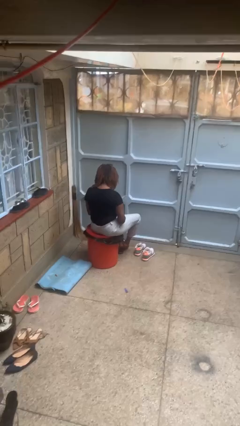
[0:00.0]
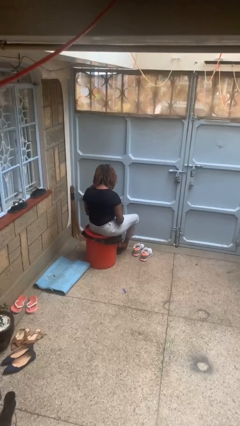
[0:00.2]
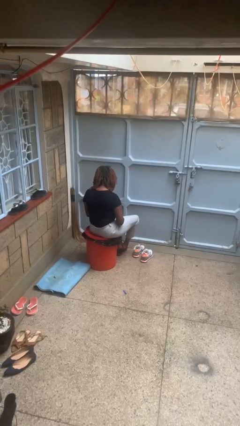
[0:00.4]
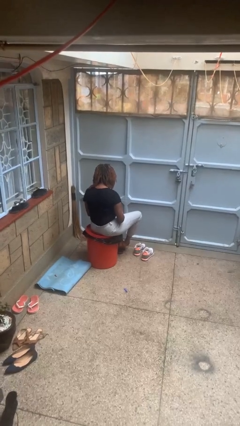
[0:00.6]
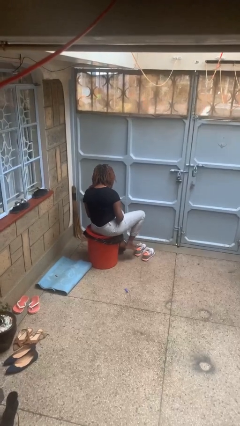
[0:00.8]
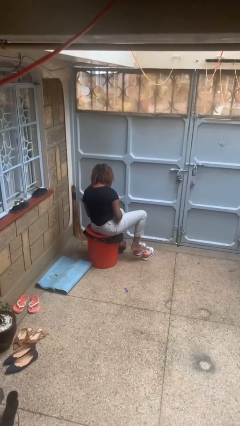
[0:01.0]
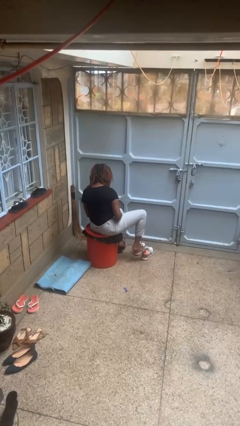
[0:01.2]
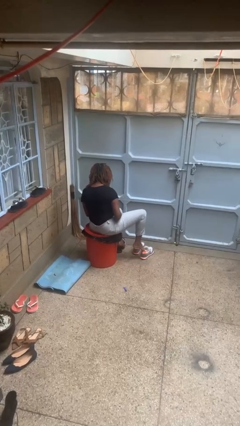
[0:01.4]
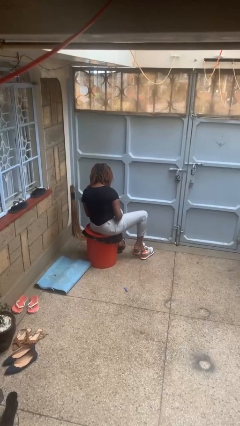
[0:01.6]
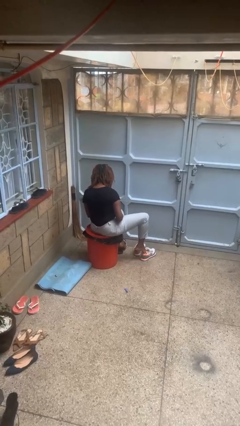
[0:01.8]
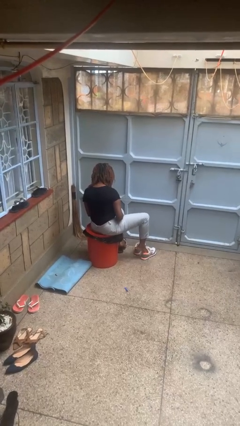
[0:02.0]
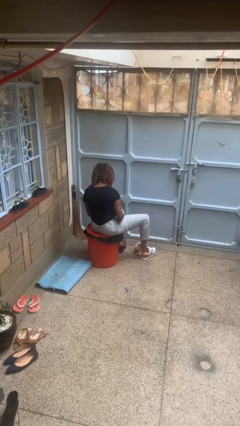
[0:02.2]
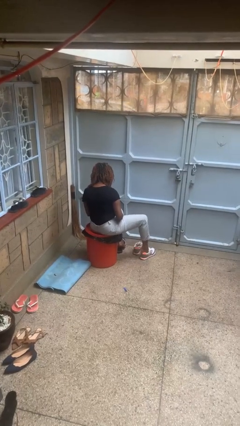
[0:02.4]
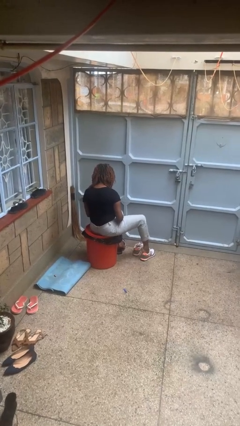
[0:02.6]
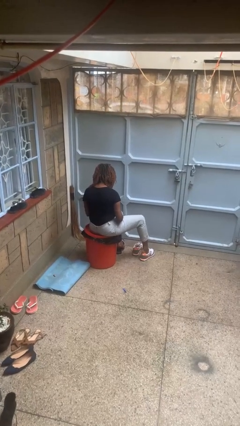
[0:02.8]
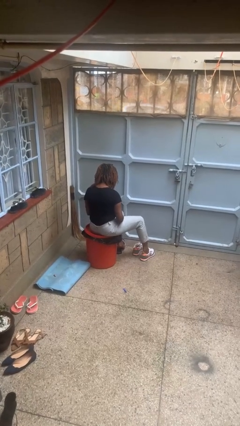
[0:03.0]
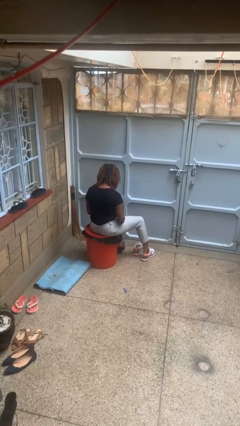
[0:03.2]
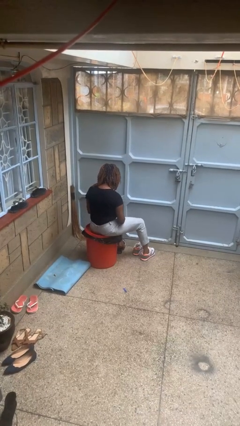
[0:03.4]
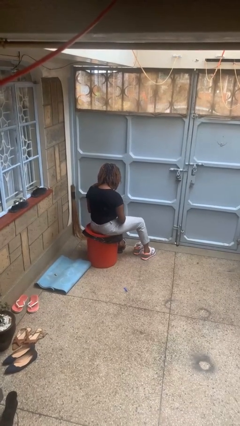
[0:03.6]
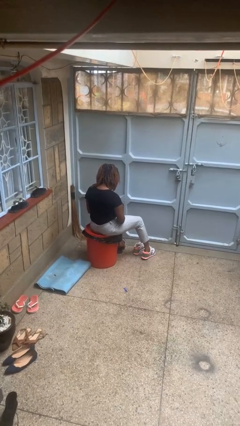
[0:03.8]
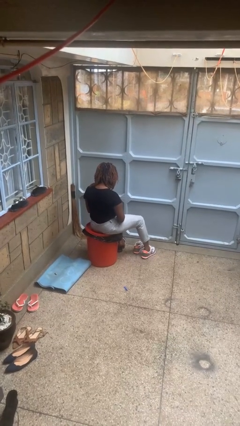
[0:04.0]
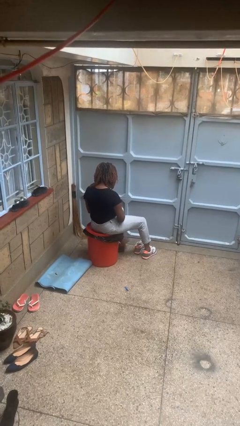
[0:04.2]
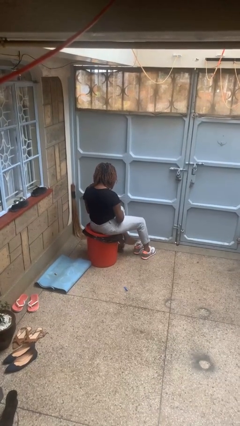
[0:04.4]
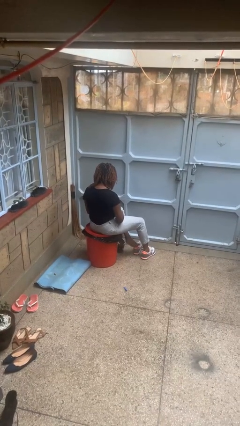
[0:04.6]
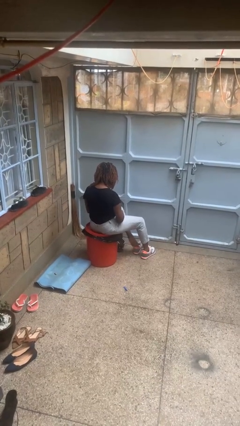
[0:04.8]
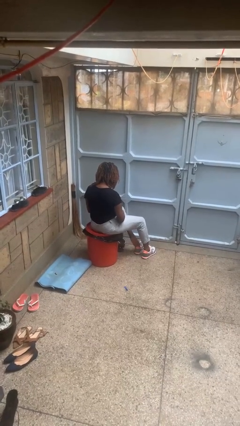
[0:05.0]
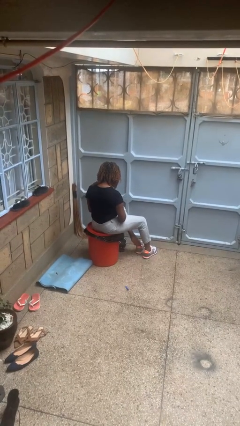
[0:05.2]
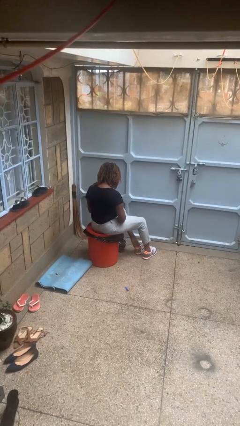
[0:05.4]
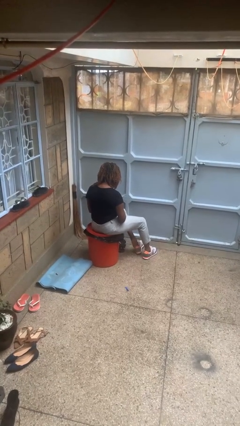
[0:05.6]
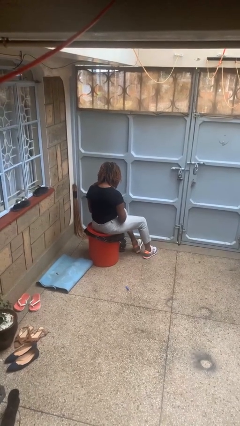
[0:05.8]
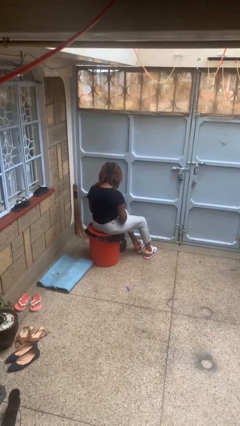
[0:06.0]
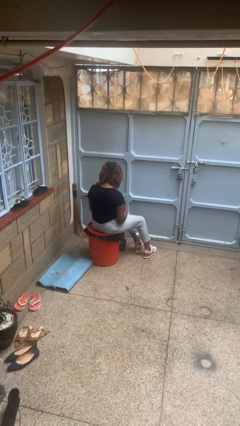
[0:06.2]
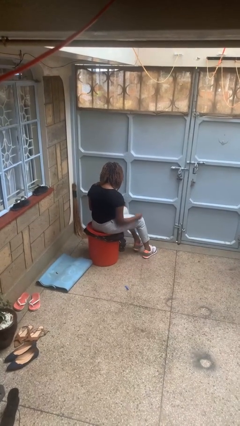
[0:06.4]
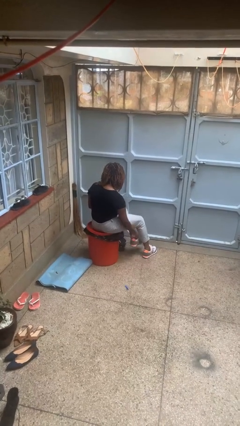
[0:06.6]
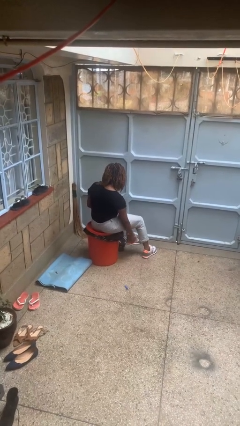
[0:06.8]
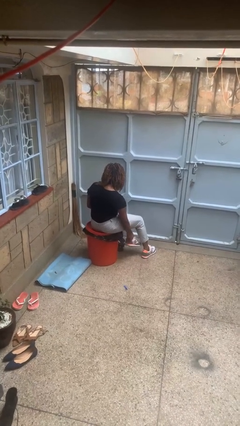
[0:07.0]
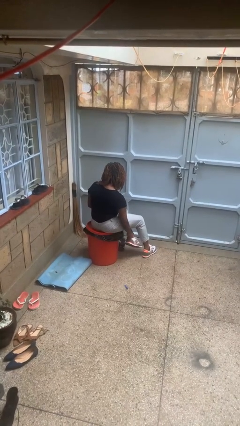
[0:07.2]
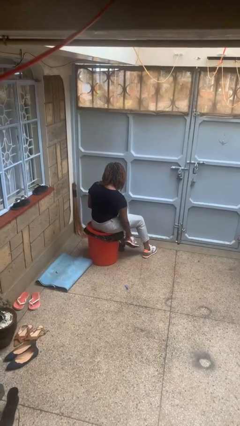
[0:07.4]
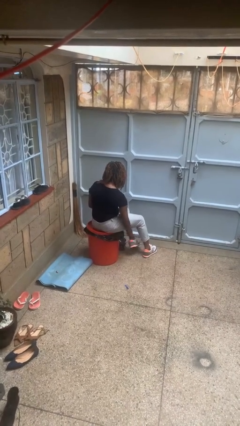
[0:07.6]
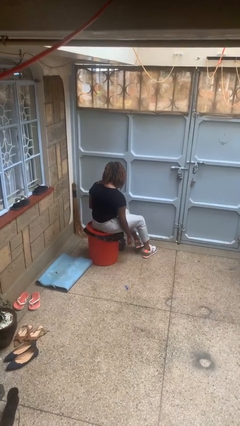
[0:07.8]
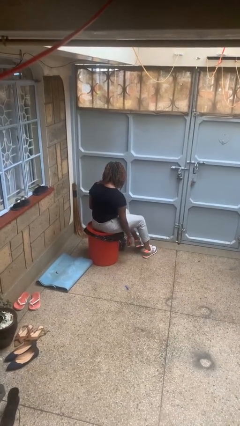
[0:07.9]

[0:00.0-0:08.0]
person puts on shoes

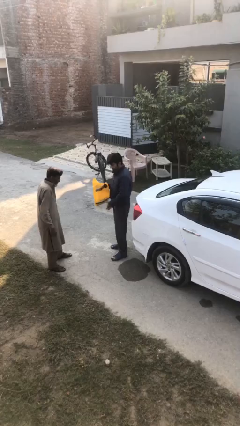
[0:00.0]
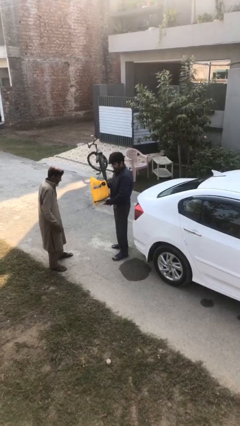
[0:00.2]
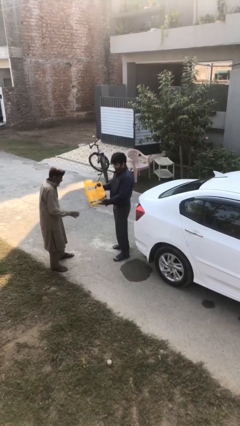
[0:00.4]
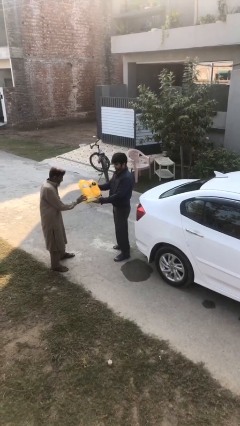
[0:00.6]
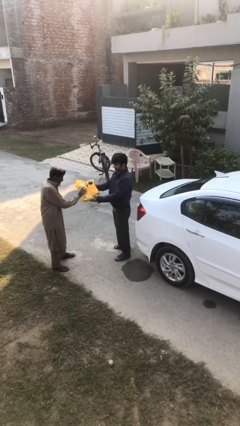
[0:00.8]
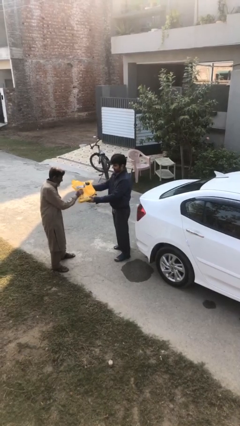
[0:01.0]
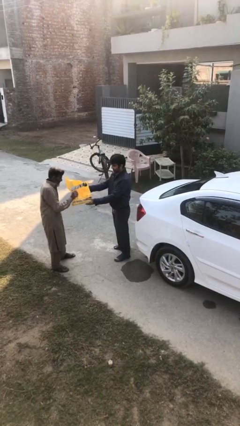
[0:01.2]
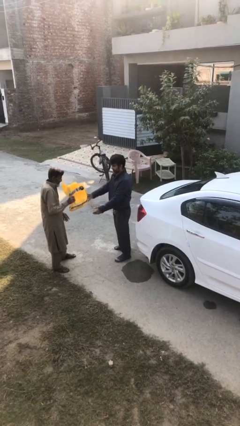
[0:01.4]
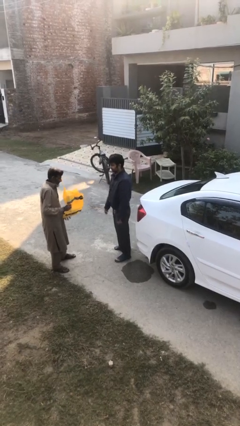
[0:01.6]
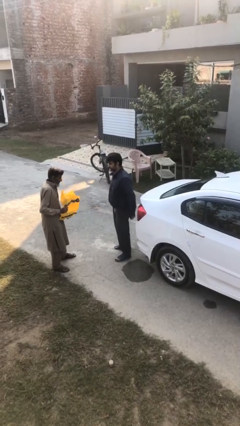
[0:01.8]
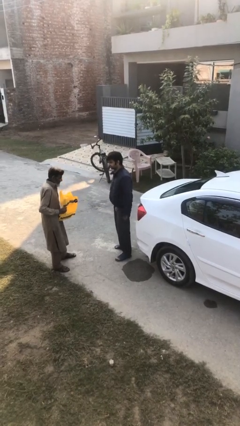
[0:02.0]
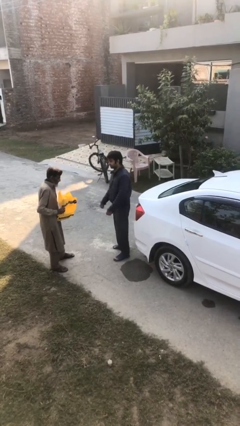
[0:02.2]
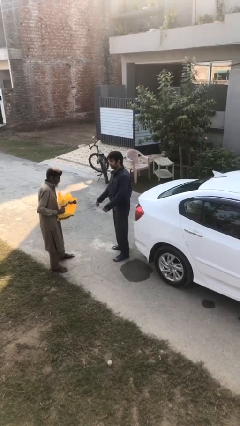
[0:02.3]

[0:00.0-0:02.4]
person transfers object to person

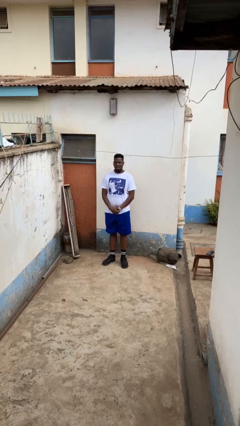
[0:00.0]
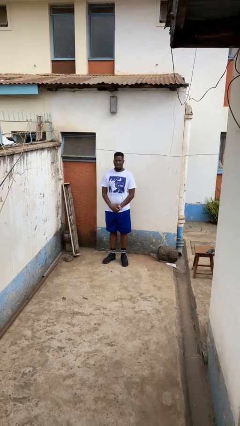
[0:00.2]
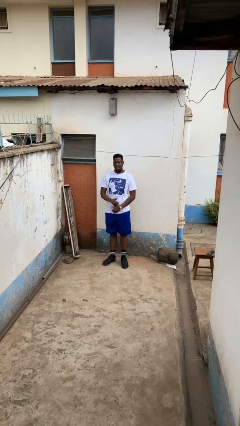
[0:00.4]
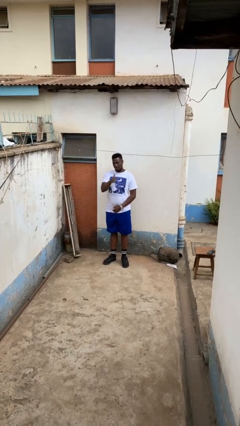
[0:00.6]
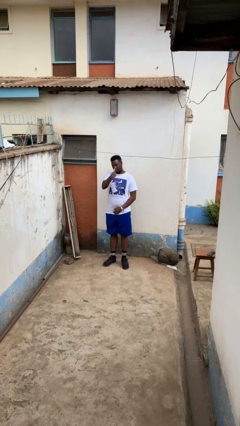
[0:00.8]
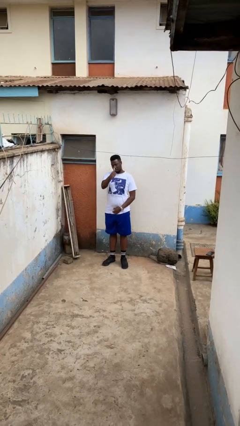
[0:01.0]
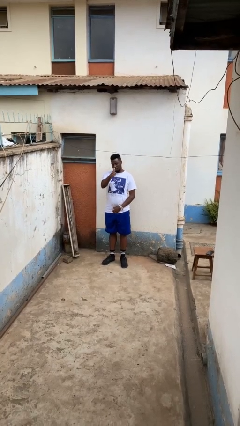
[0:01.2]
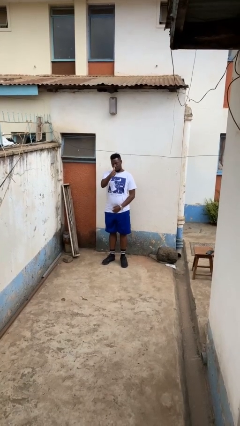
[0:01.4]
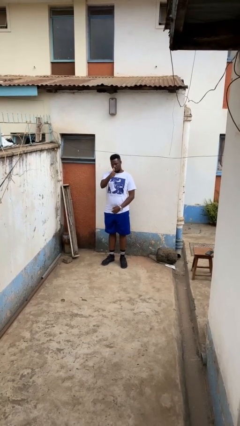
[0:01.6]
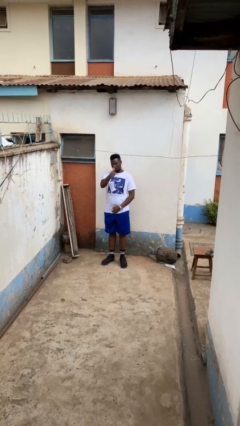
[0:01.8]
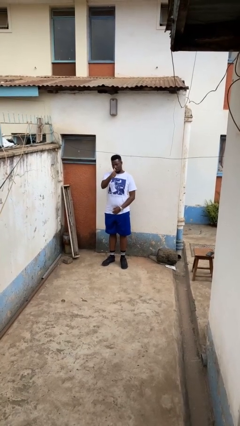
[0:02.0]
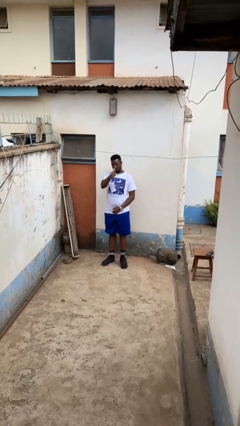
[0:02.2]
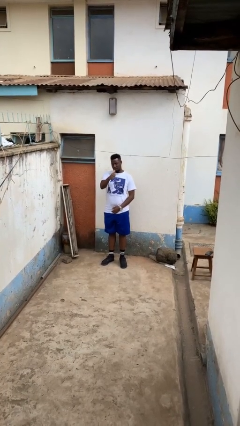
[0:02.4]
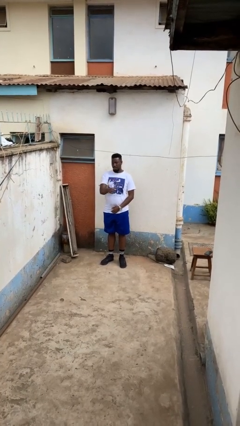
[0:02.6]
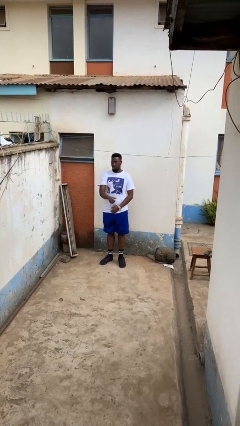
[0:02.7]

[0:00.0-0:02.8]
person gestures thumbs up

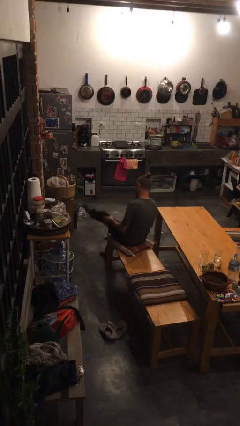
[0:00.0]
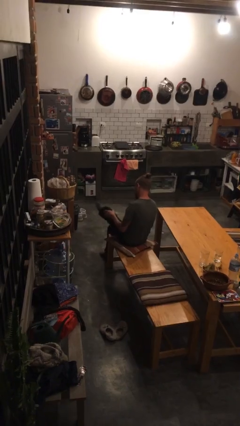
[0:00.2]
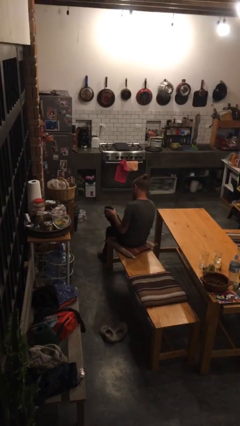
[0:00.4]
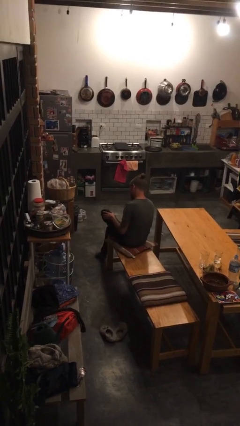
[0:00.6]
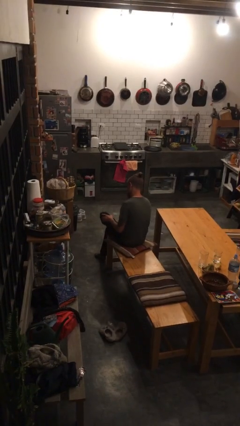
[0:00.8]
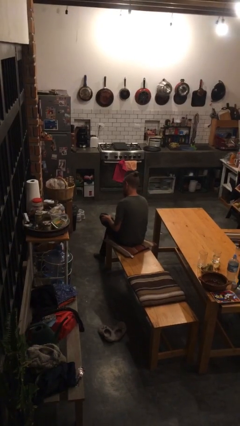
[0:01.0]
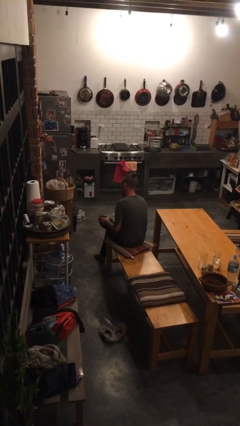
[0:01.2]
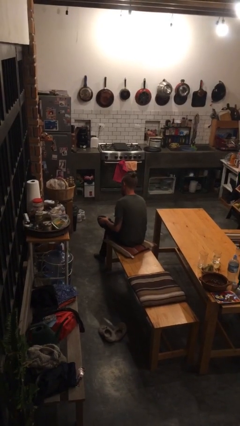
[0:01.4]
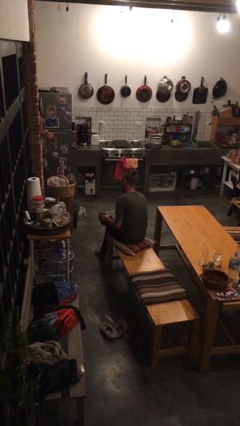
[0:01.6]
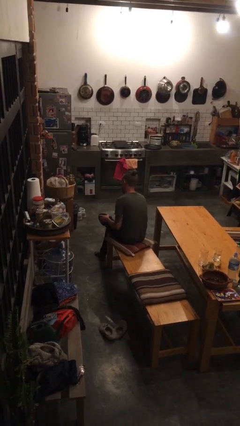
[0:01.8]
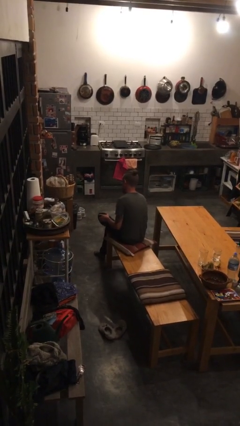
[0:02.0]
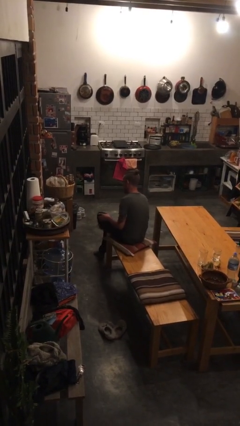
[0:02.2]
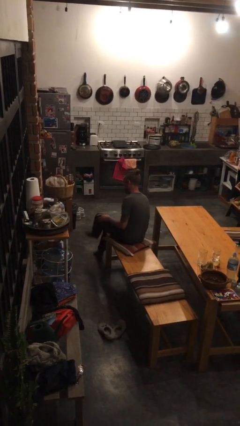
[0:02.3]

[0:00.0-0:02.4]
person crosses legs

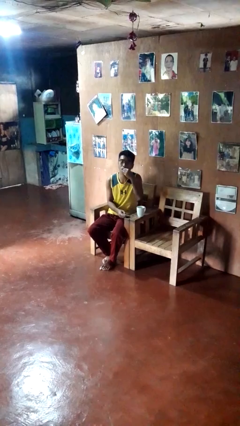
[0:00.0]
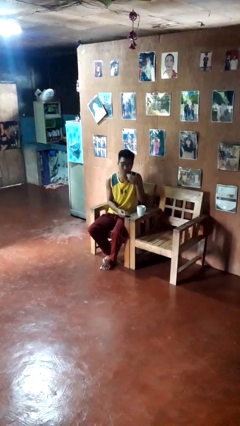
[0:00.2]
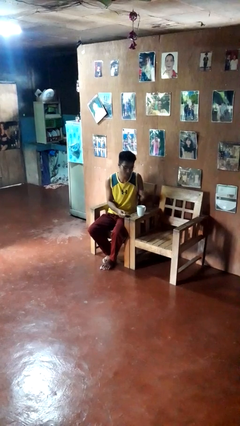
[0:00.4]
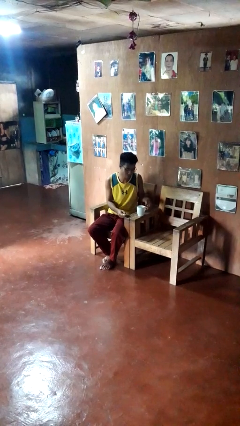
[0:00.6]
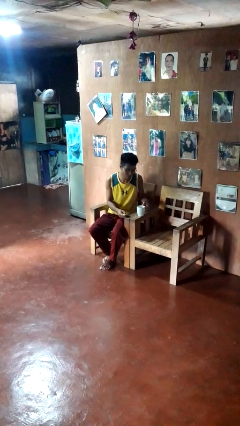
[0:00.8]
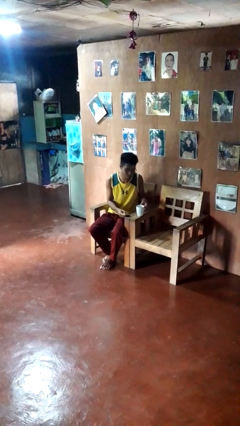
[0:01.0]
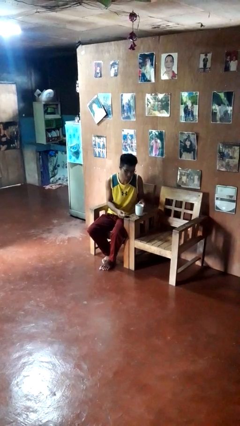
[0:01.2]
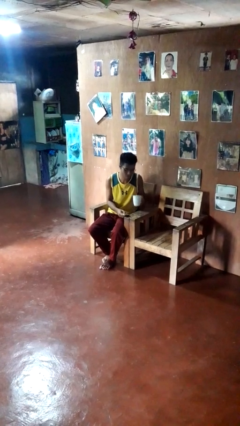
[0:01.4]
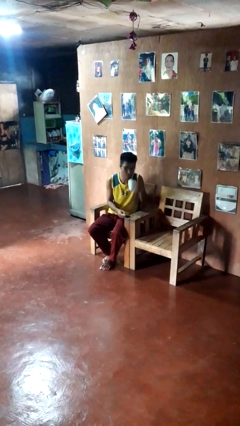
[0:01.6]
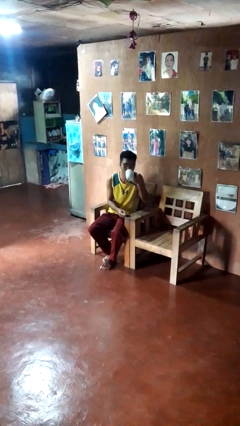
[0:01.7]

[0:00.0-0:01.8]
person takes medicine pills

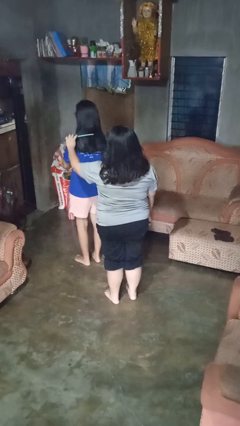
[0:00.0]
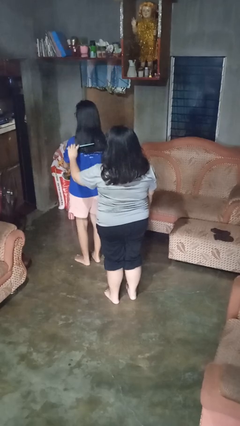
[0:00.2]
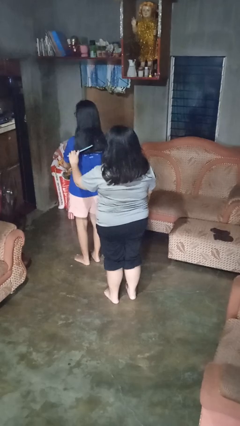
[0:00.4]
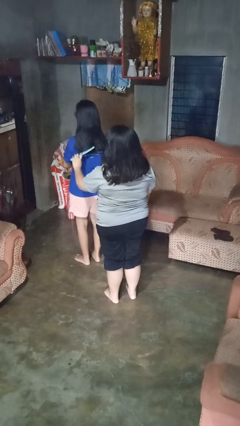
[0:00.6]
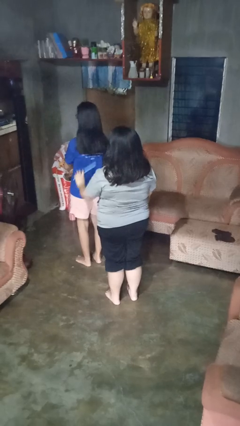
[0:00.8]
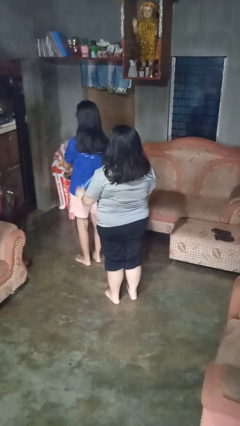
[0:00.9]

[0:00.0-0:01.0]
person brushes hair of person
